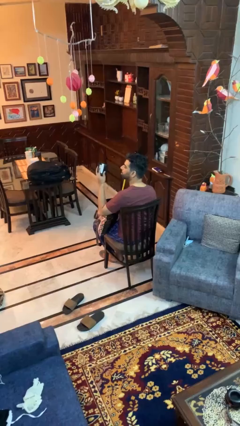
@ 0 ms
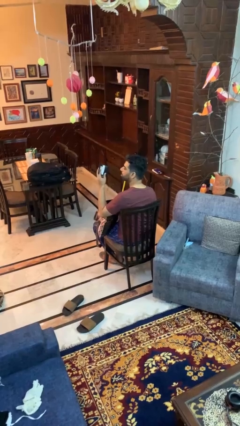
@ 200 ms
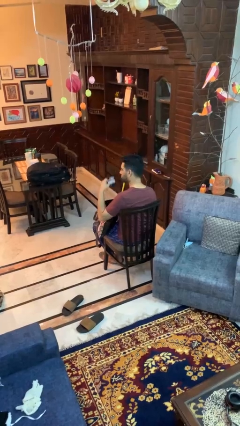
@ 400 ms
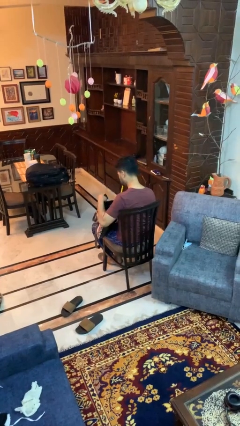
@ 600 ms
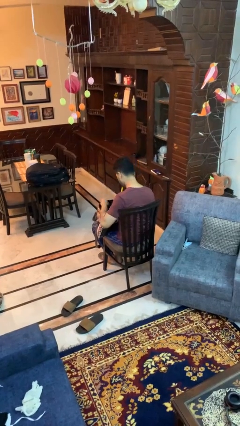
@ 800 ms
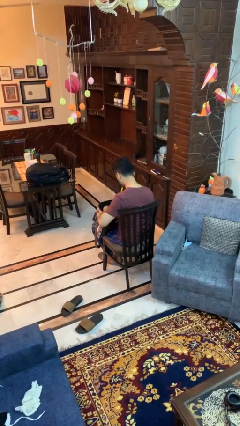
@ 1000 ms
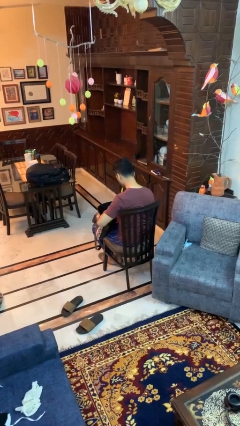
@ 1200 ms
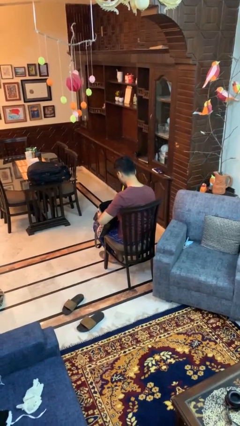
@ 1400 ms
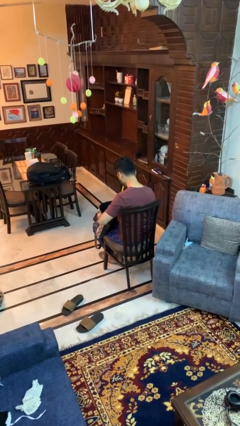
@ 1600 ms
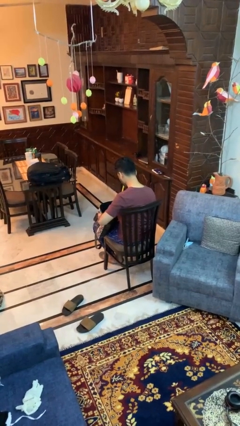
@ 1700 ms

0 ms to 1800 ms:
person puts object into purse

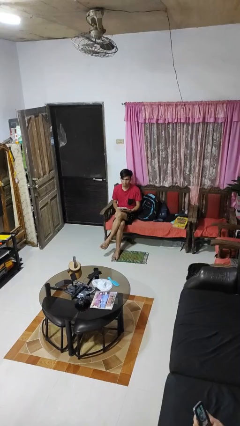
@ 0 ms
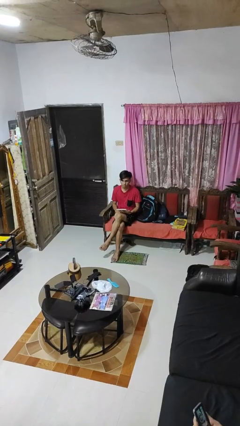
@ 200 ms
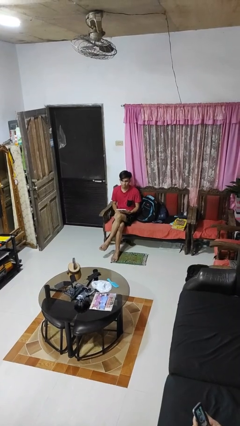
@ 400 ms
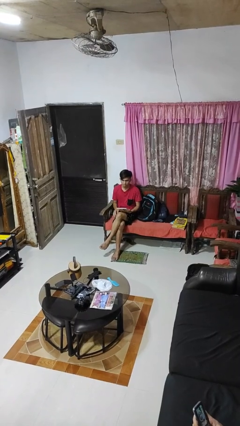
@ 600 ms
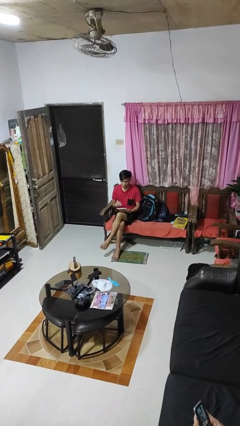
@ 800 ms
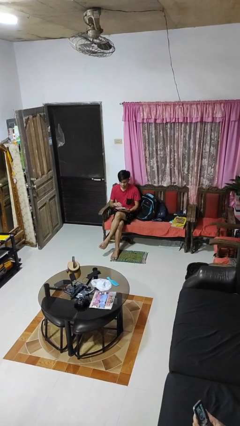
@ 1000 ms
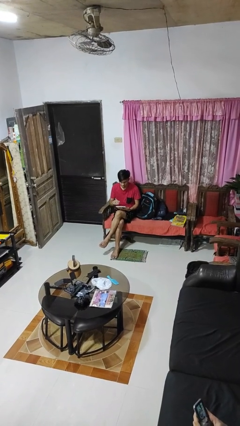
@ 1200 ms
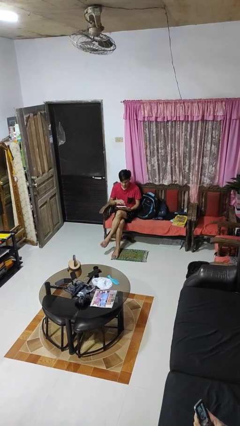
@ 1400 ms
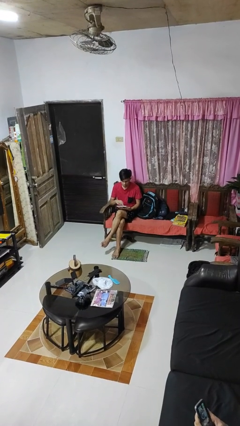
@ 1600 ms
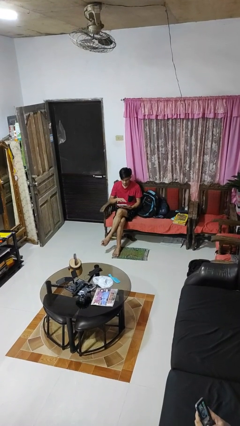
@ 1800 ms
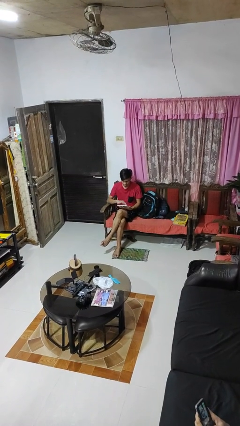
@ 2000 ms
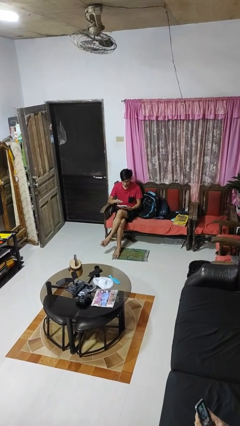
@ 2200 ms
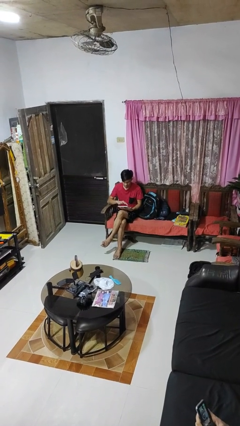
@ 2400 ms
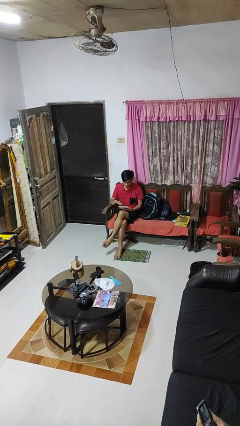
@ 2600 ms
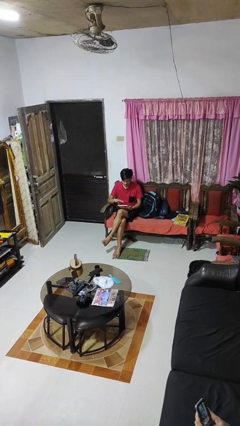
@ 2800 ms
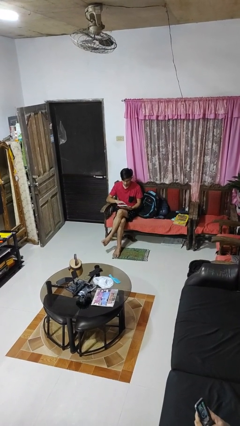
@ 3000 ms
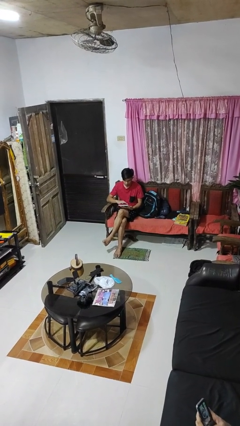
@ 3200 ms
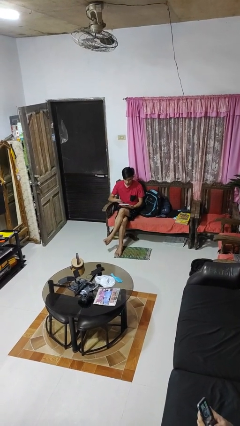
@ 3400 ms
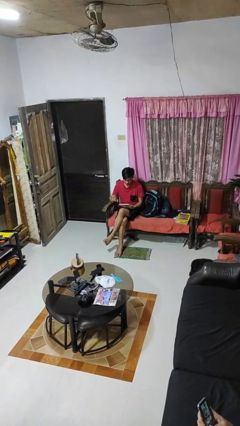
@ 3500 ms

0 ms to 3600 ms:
person interacts with tablet

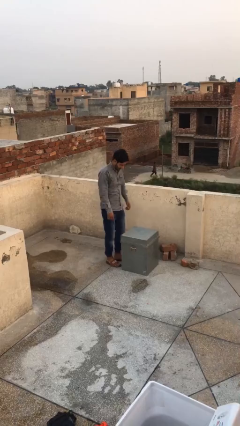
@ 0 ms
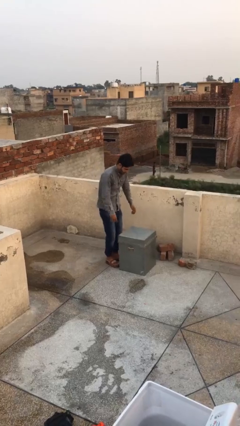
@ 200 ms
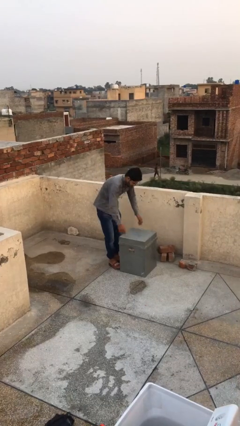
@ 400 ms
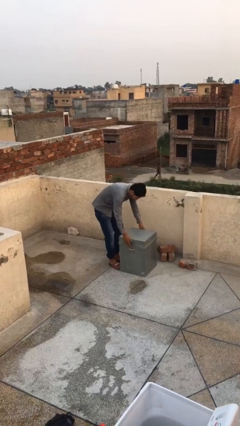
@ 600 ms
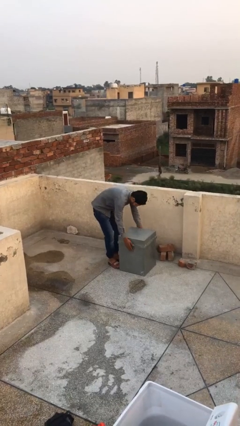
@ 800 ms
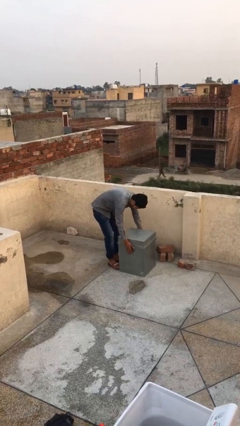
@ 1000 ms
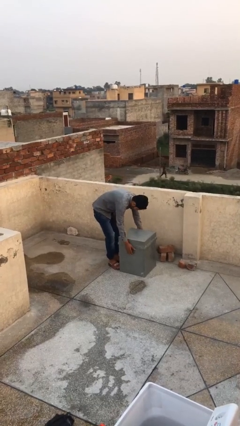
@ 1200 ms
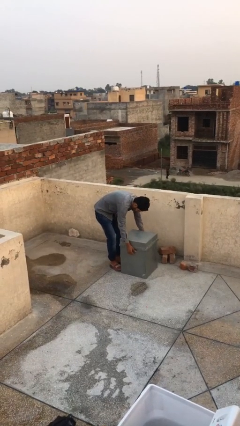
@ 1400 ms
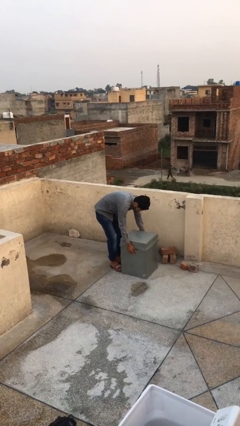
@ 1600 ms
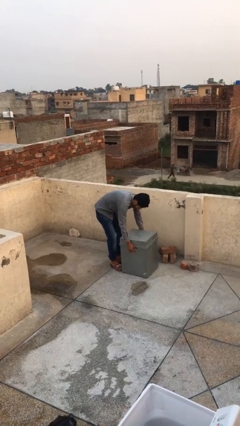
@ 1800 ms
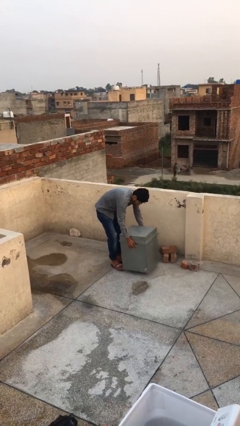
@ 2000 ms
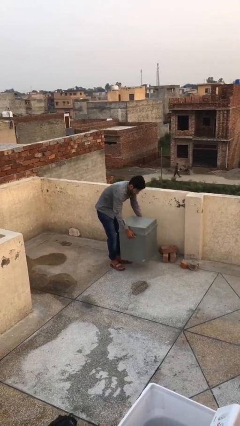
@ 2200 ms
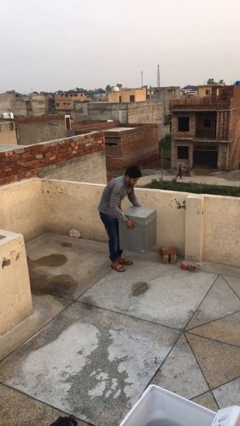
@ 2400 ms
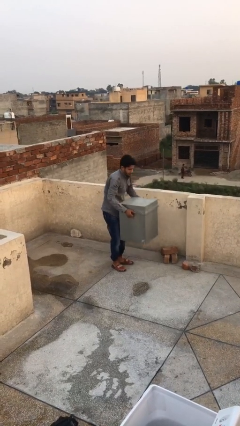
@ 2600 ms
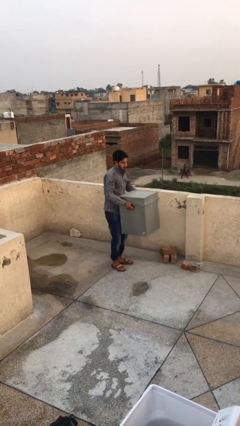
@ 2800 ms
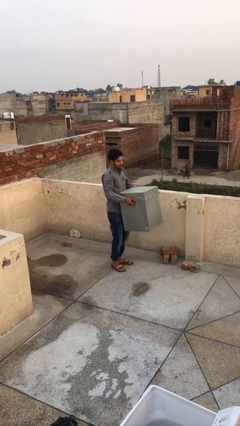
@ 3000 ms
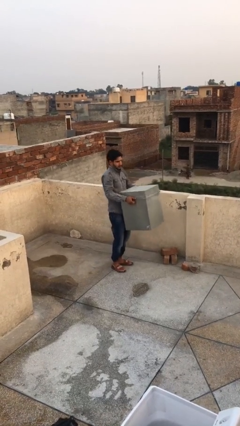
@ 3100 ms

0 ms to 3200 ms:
person picks up object from floor

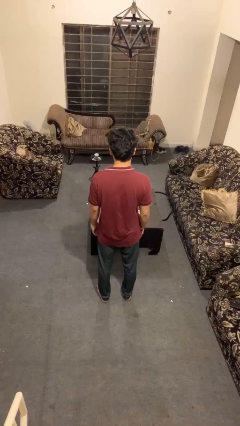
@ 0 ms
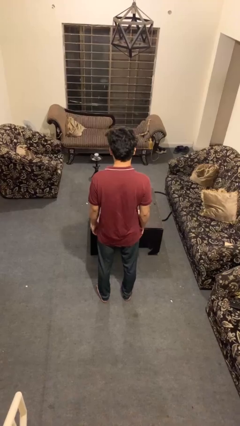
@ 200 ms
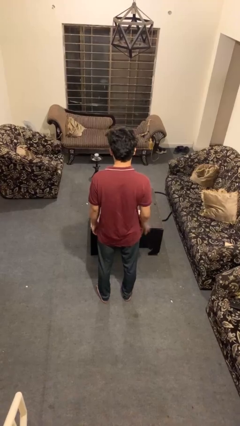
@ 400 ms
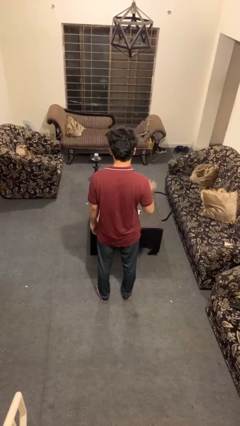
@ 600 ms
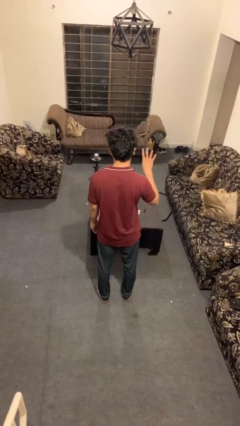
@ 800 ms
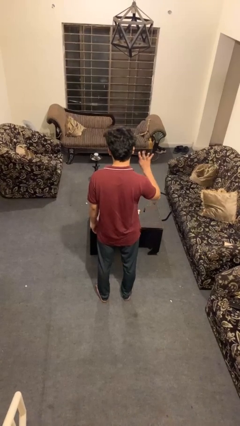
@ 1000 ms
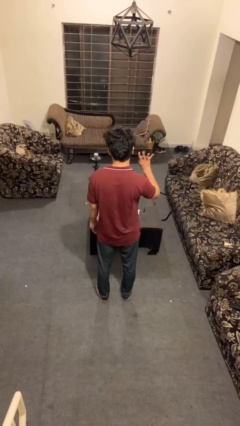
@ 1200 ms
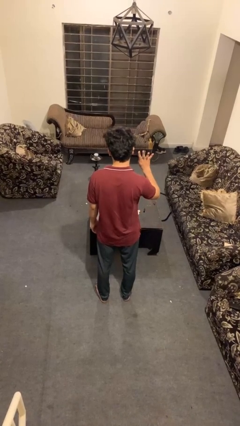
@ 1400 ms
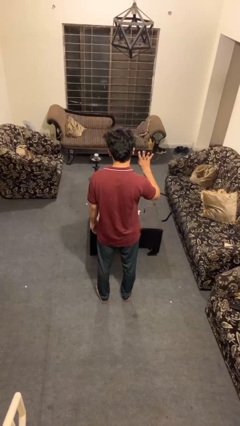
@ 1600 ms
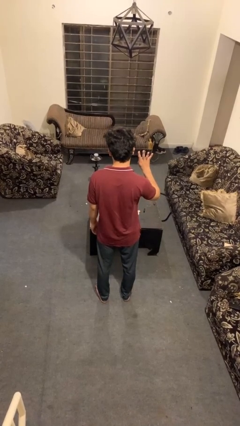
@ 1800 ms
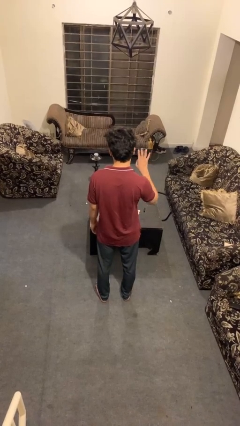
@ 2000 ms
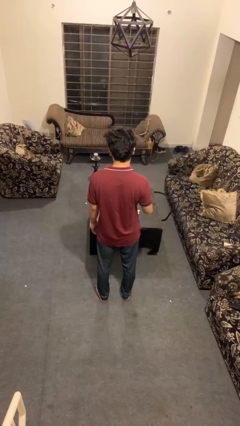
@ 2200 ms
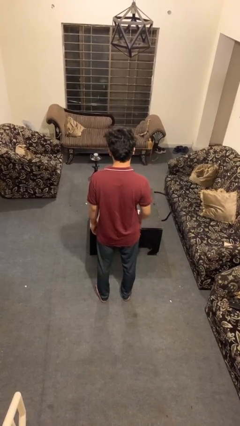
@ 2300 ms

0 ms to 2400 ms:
person gestures number four

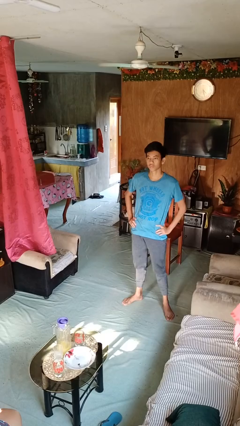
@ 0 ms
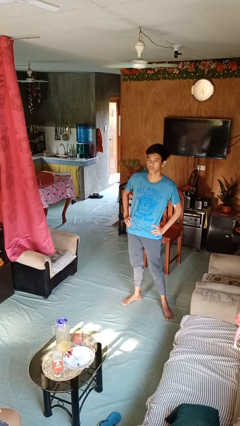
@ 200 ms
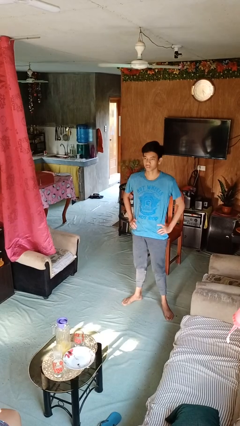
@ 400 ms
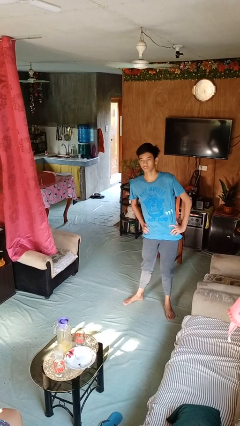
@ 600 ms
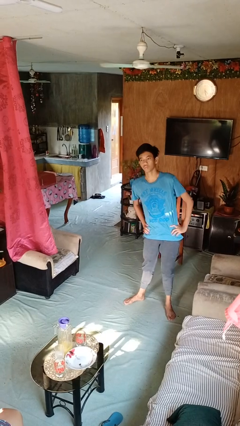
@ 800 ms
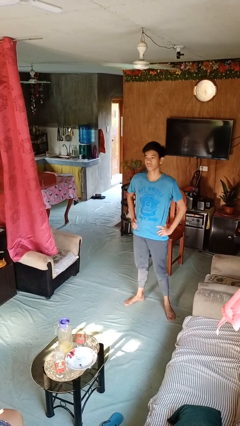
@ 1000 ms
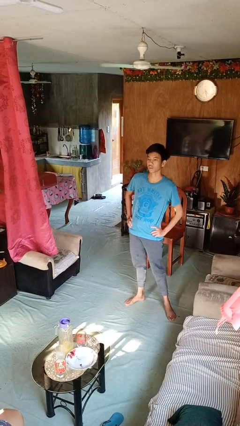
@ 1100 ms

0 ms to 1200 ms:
person wiggles hips

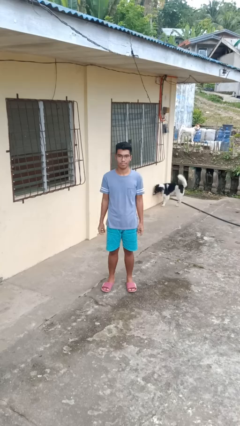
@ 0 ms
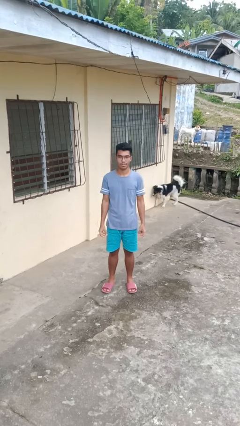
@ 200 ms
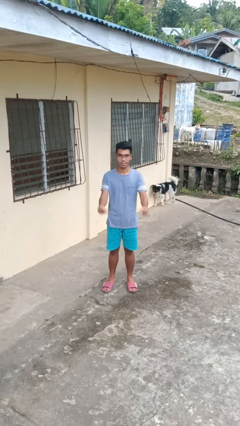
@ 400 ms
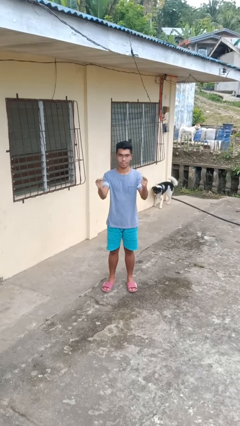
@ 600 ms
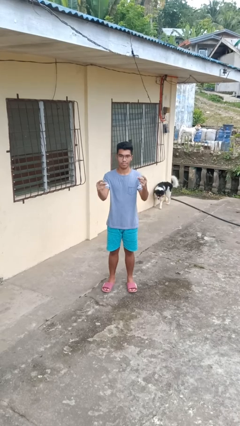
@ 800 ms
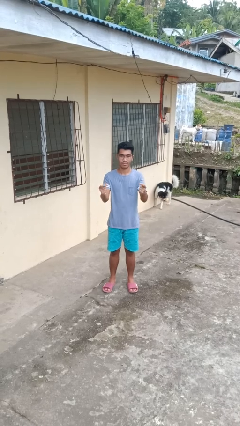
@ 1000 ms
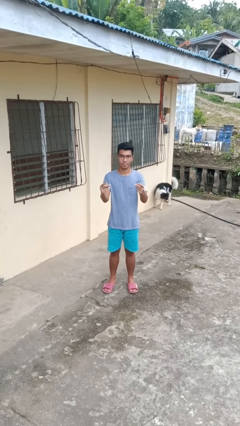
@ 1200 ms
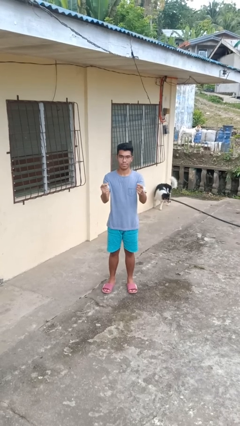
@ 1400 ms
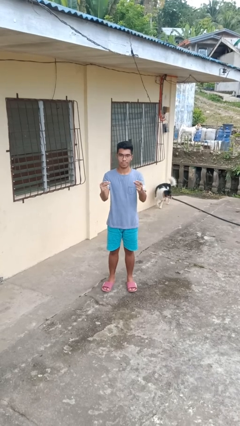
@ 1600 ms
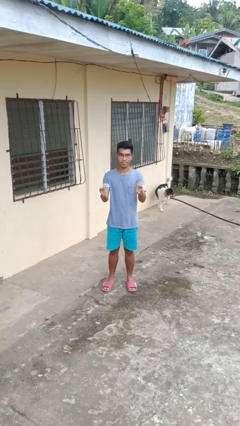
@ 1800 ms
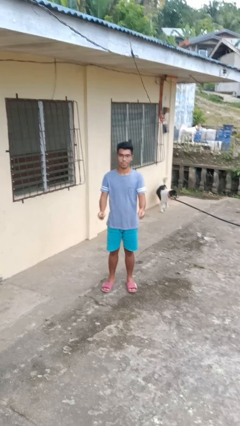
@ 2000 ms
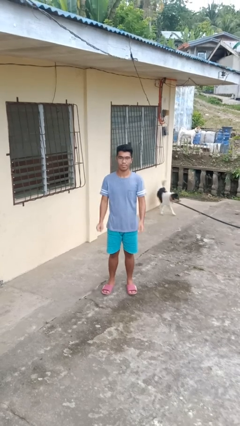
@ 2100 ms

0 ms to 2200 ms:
person snaps fingers

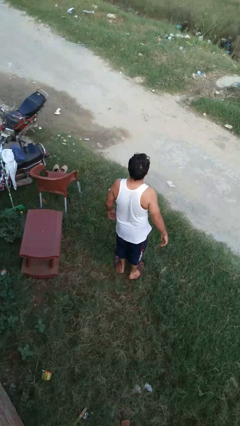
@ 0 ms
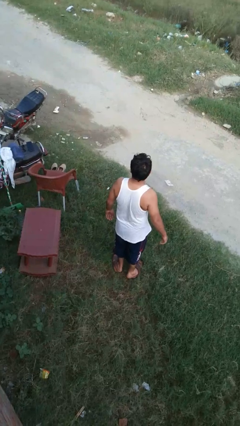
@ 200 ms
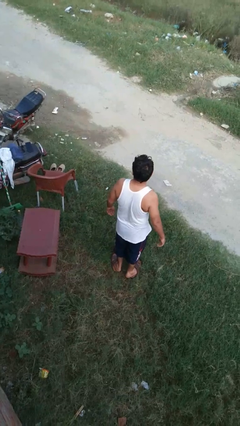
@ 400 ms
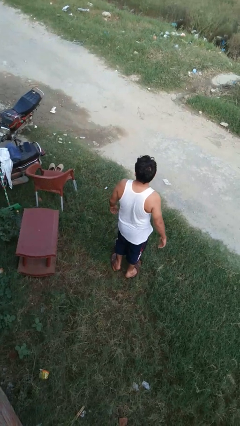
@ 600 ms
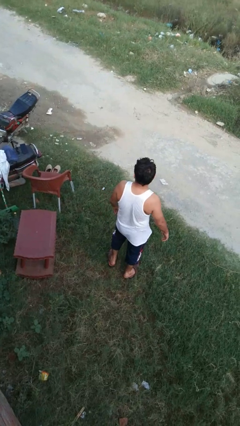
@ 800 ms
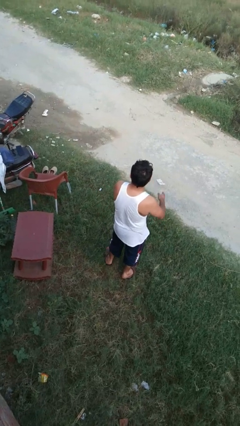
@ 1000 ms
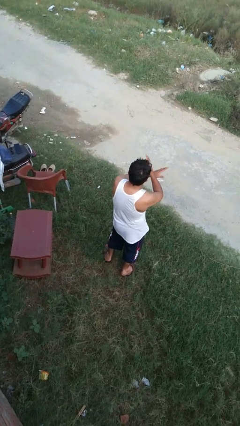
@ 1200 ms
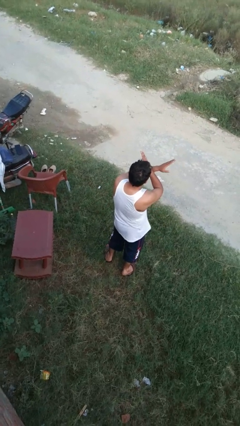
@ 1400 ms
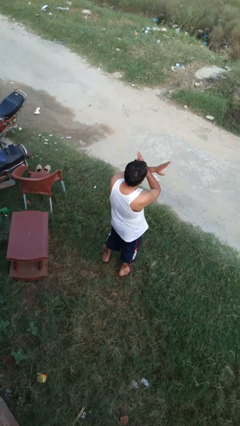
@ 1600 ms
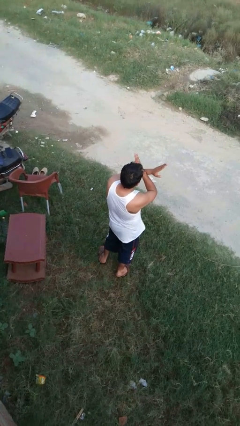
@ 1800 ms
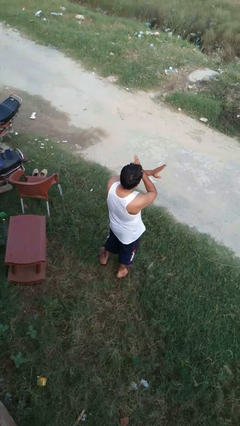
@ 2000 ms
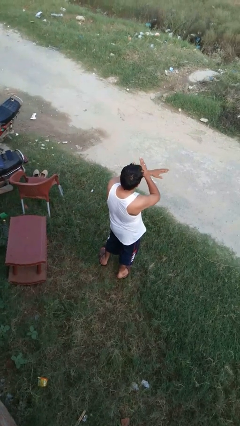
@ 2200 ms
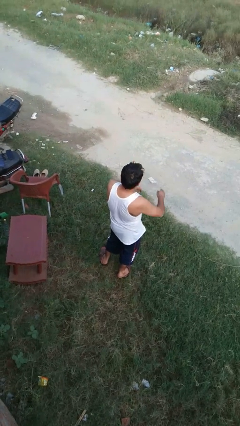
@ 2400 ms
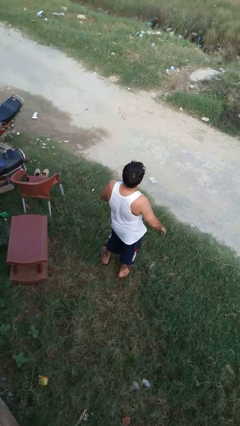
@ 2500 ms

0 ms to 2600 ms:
person karate chop

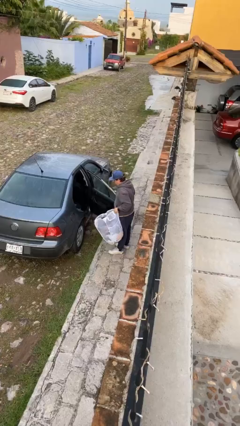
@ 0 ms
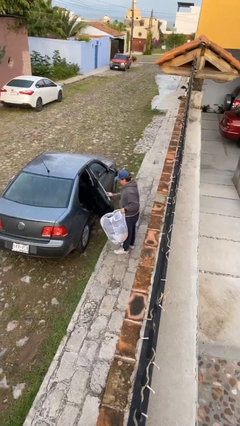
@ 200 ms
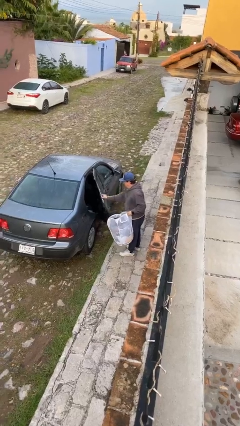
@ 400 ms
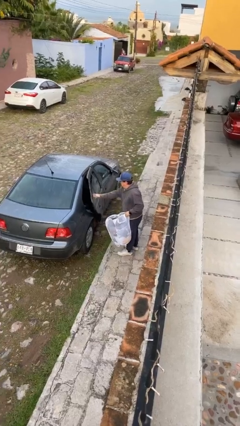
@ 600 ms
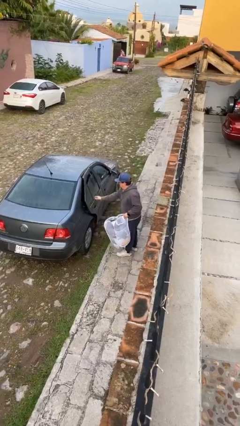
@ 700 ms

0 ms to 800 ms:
person closes car door
